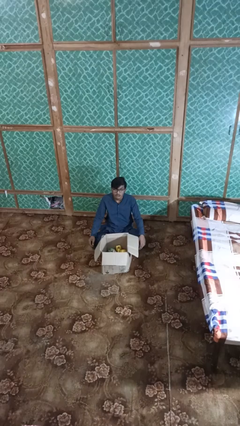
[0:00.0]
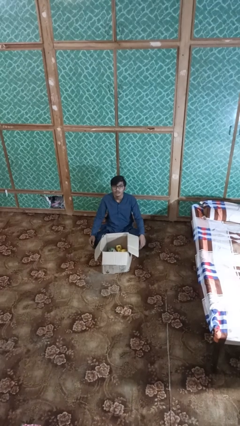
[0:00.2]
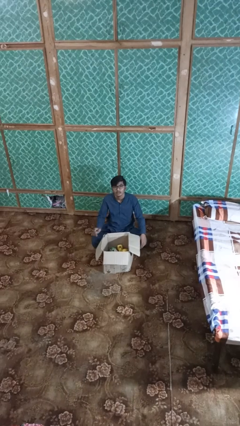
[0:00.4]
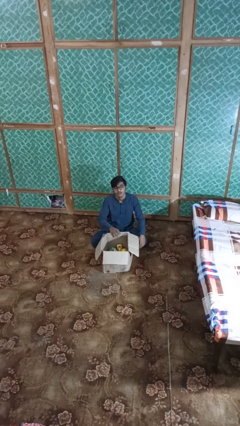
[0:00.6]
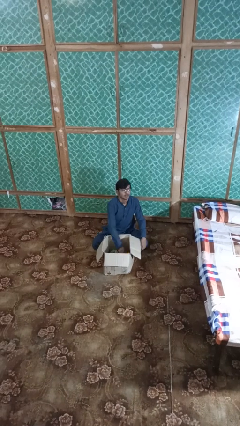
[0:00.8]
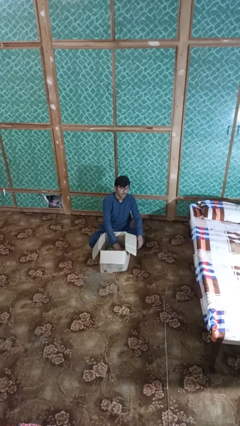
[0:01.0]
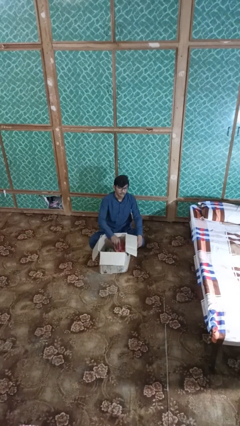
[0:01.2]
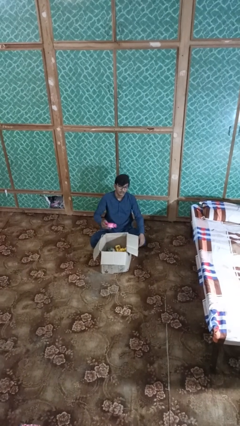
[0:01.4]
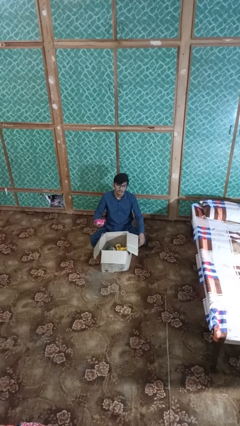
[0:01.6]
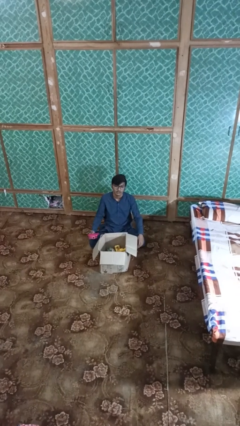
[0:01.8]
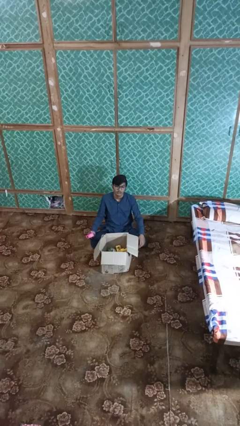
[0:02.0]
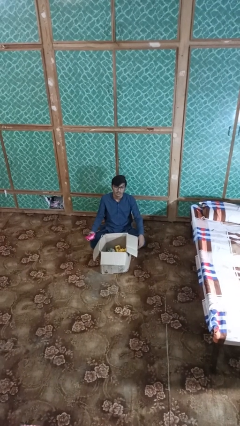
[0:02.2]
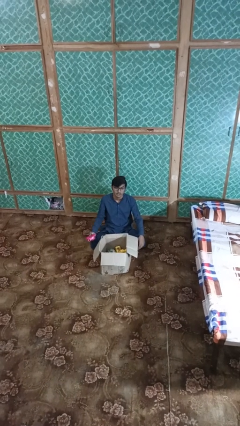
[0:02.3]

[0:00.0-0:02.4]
person takes object from box

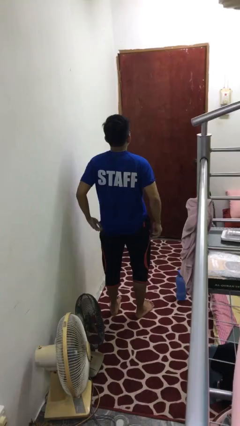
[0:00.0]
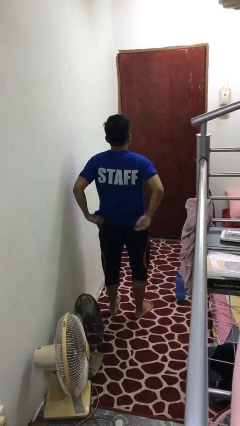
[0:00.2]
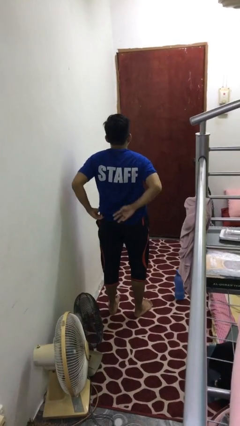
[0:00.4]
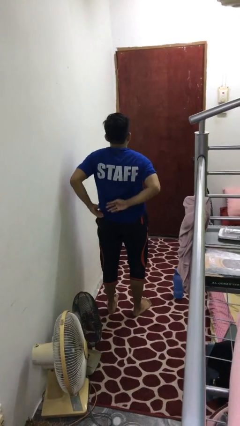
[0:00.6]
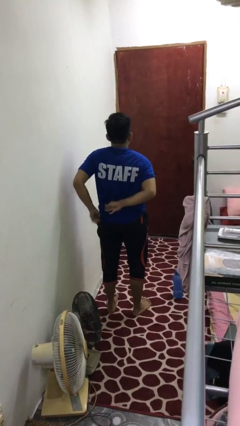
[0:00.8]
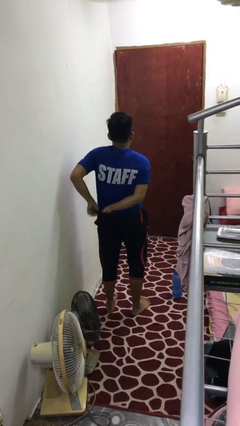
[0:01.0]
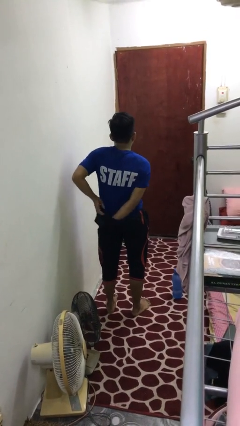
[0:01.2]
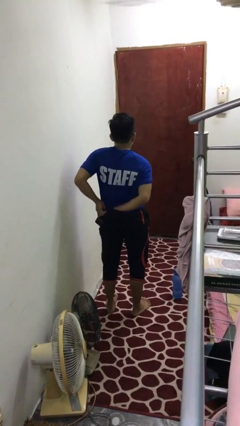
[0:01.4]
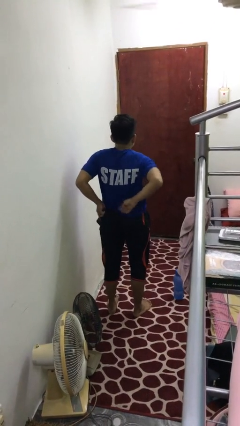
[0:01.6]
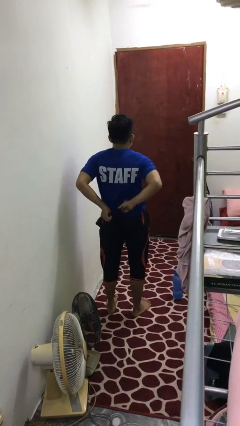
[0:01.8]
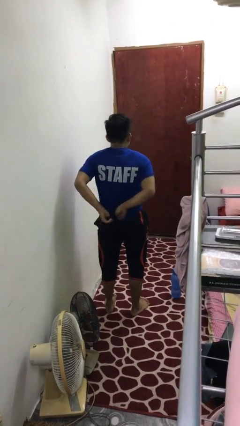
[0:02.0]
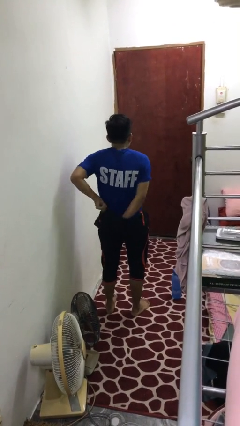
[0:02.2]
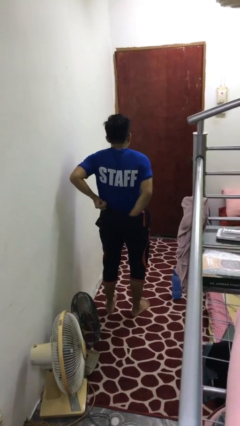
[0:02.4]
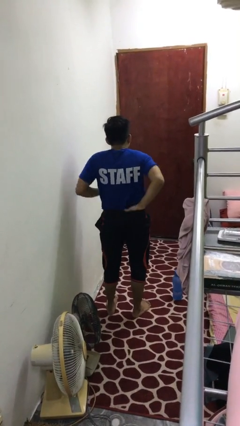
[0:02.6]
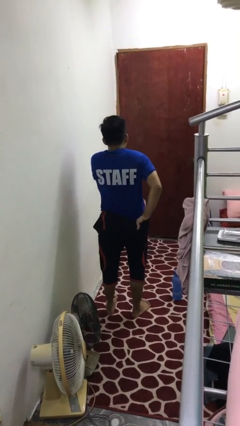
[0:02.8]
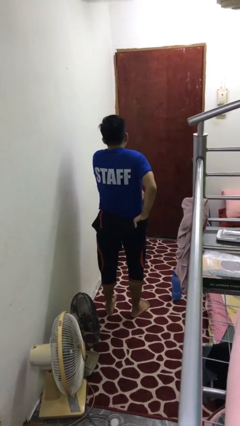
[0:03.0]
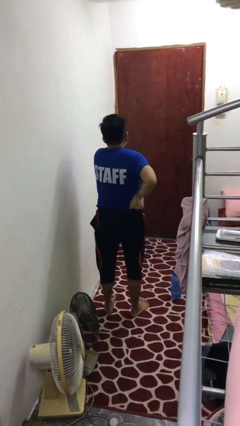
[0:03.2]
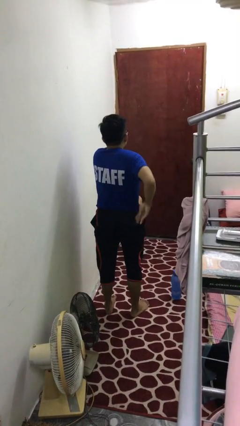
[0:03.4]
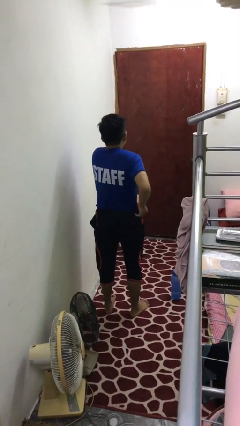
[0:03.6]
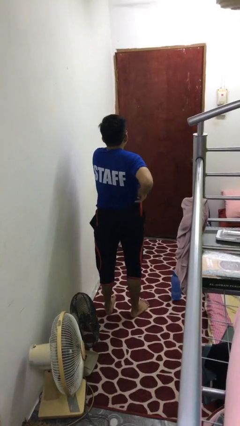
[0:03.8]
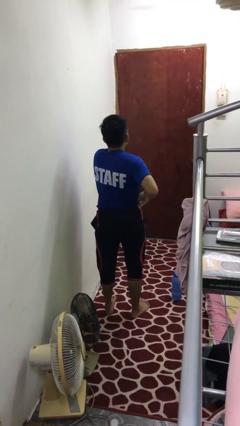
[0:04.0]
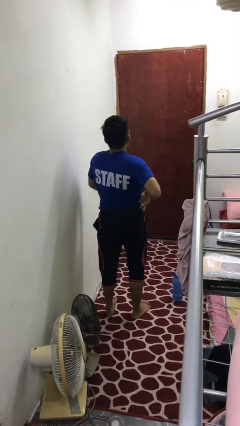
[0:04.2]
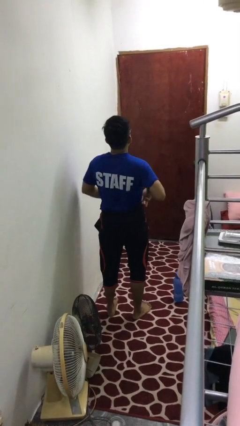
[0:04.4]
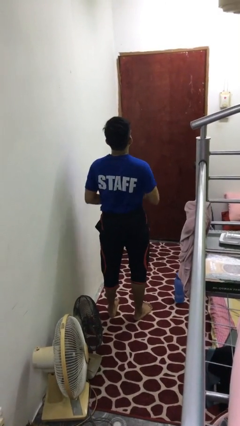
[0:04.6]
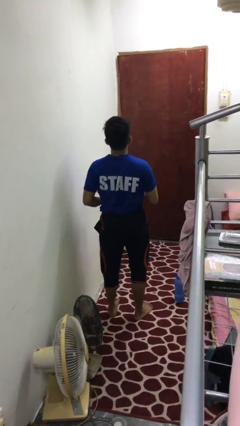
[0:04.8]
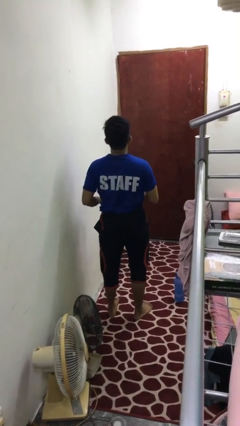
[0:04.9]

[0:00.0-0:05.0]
person tucks in shirt

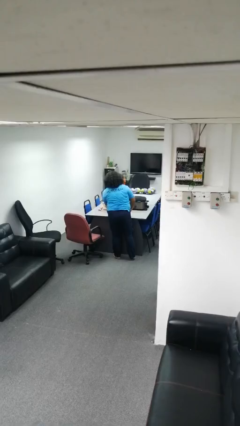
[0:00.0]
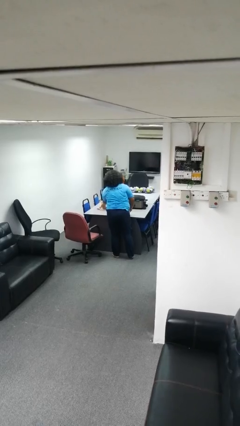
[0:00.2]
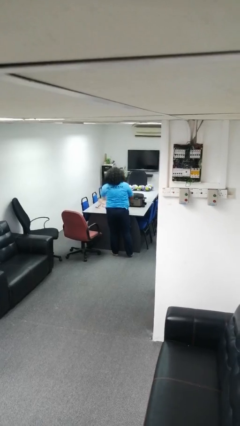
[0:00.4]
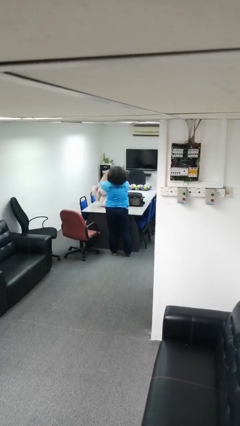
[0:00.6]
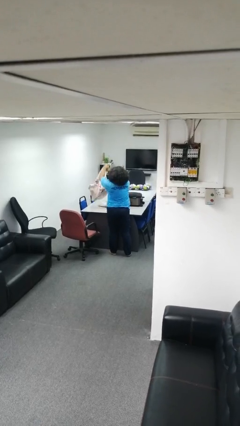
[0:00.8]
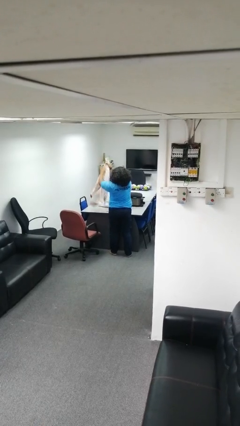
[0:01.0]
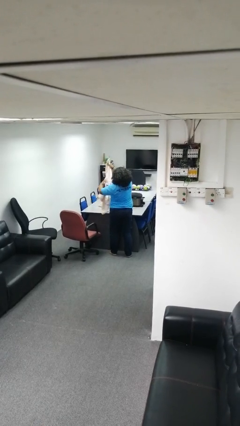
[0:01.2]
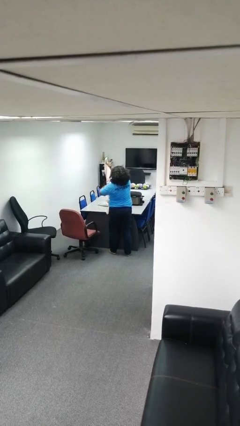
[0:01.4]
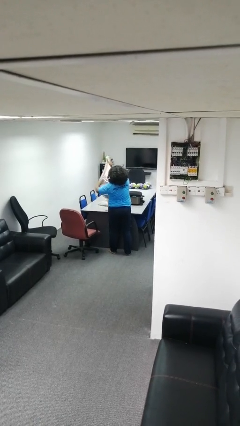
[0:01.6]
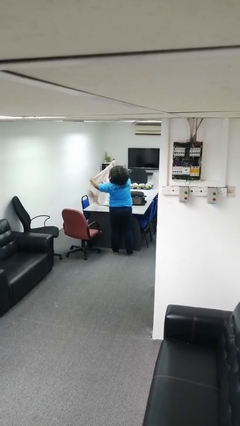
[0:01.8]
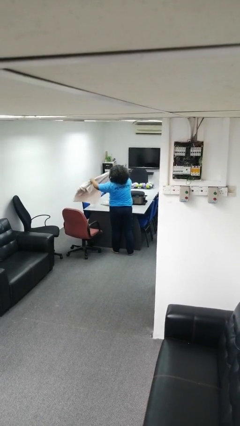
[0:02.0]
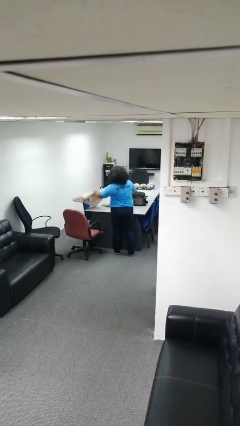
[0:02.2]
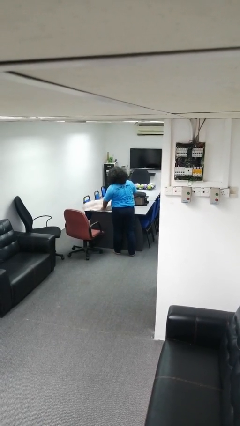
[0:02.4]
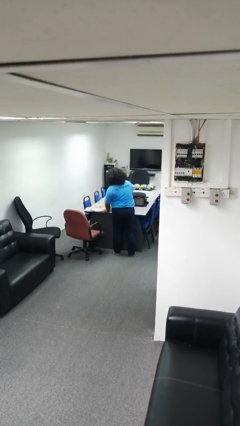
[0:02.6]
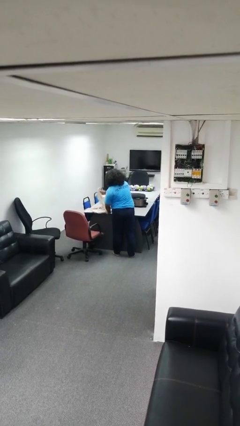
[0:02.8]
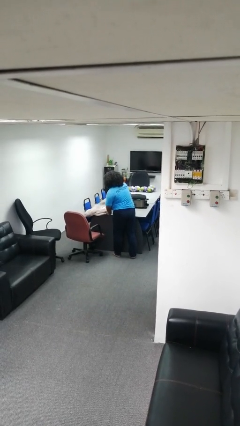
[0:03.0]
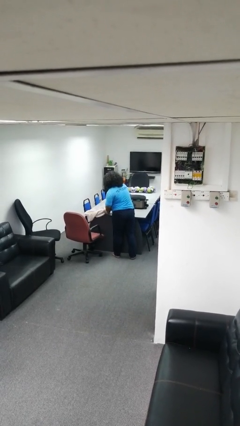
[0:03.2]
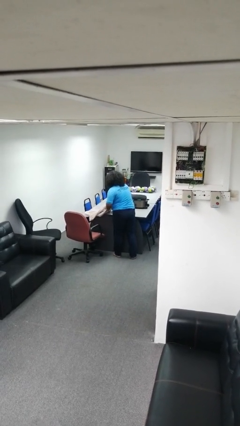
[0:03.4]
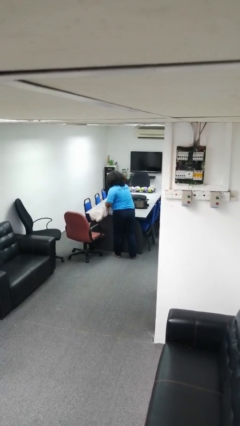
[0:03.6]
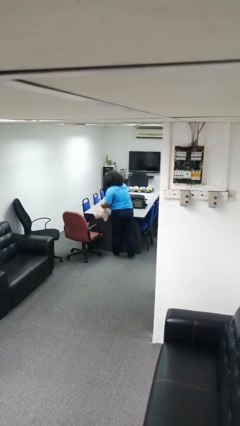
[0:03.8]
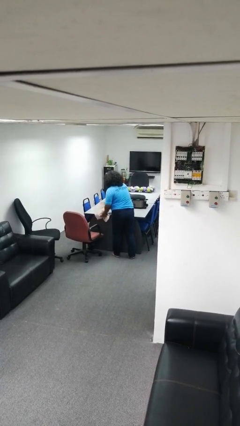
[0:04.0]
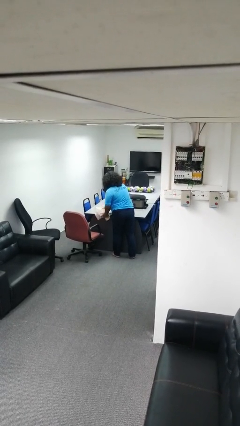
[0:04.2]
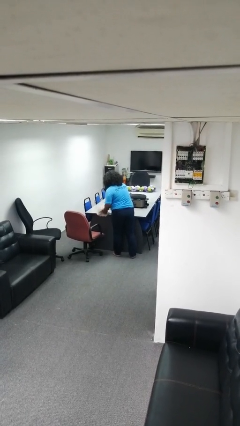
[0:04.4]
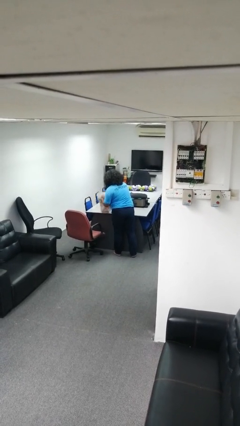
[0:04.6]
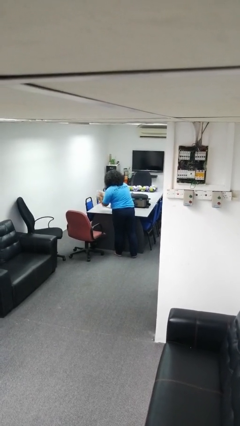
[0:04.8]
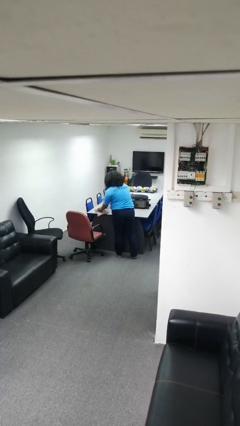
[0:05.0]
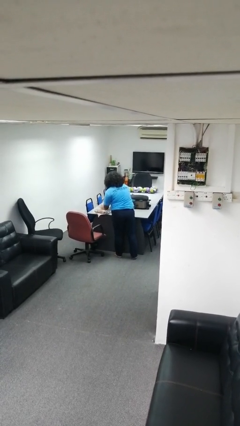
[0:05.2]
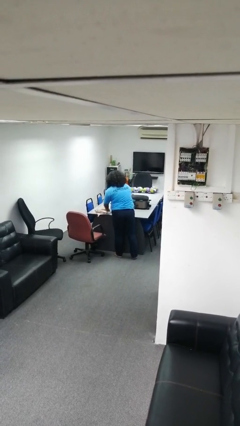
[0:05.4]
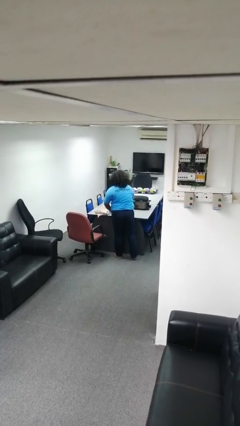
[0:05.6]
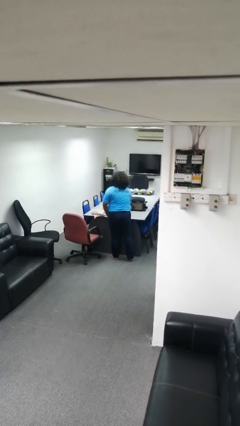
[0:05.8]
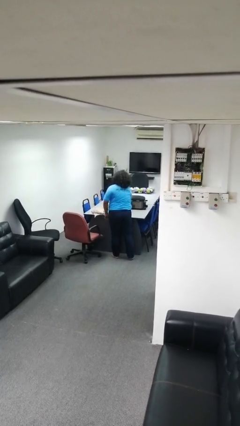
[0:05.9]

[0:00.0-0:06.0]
person folds towel

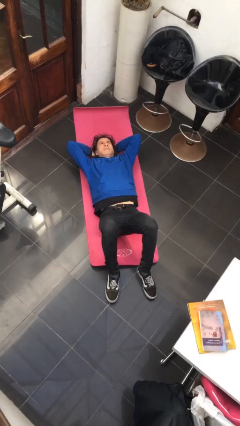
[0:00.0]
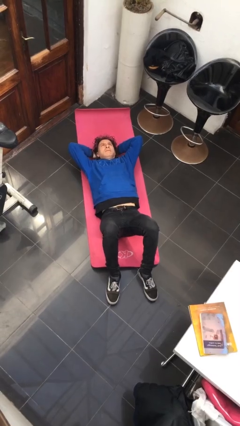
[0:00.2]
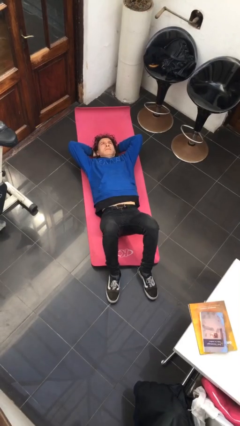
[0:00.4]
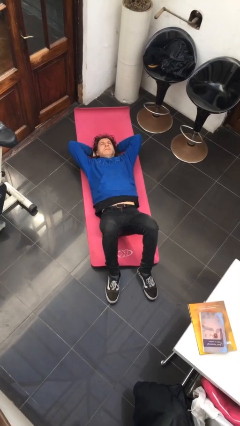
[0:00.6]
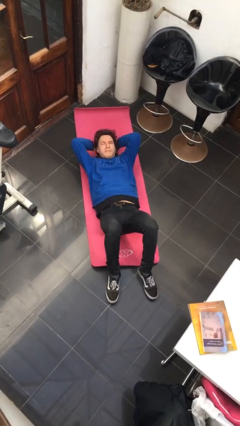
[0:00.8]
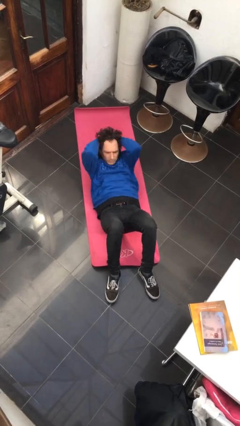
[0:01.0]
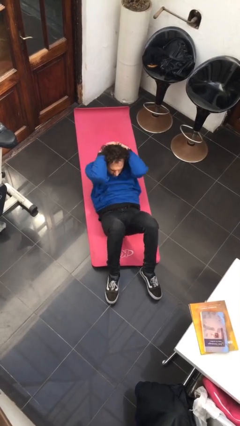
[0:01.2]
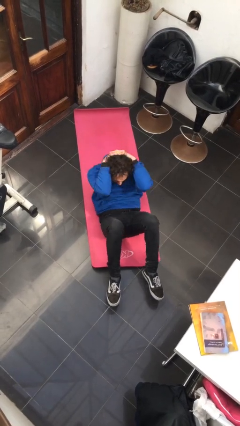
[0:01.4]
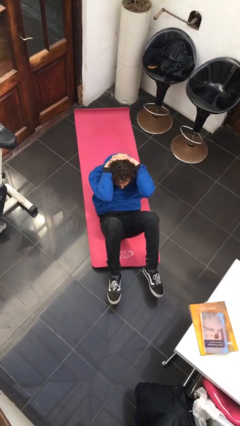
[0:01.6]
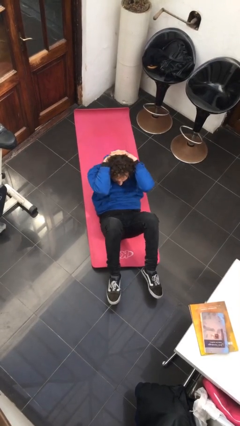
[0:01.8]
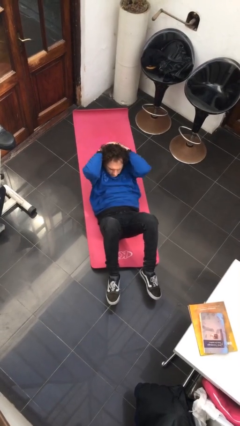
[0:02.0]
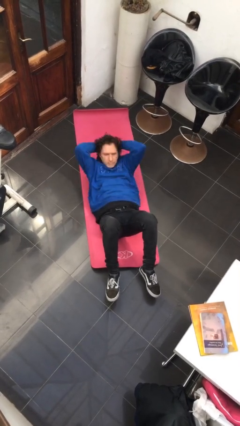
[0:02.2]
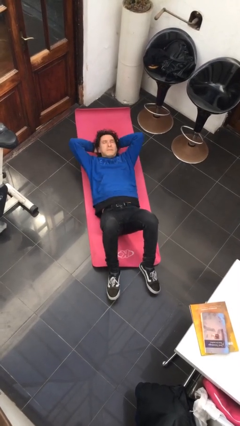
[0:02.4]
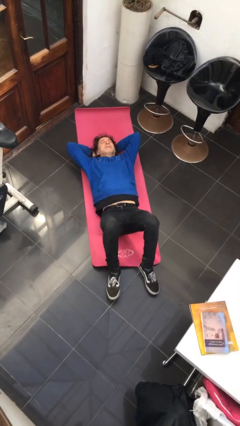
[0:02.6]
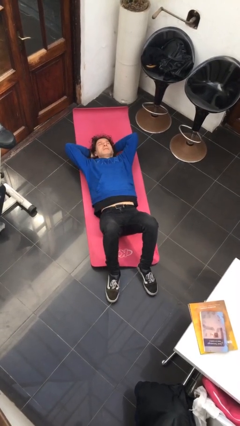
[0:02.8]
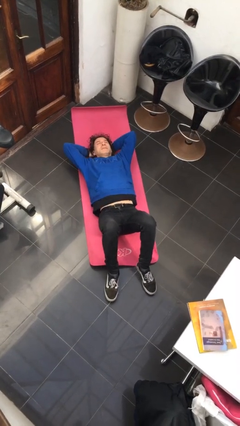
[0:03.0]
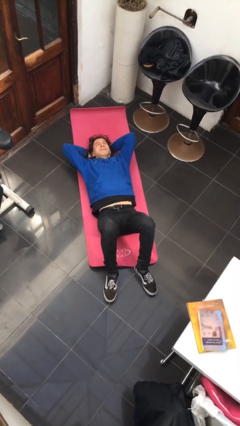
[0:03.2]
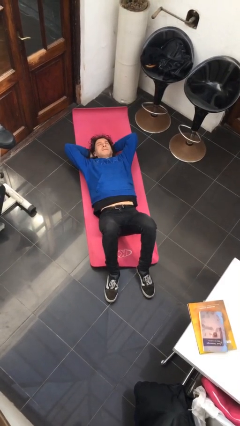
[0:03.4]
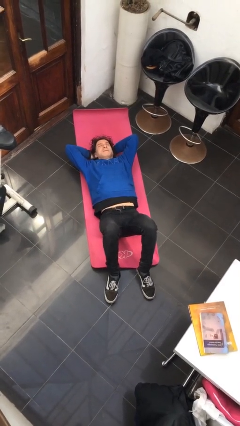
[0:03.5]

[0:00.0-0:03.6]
person exercises with situp

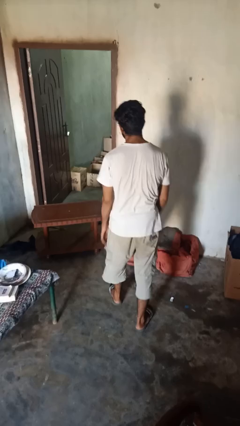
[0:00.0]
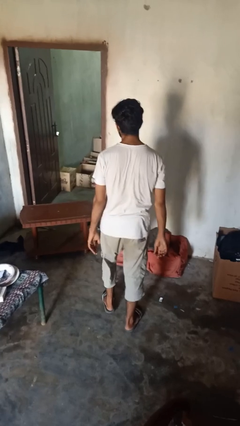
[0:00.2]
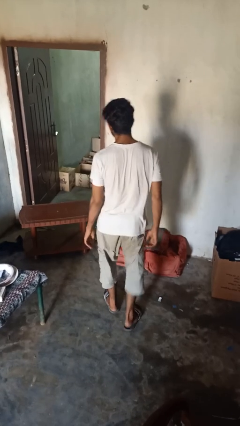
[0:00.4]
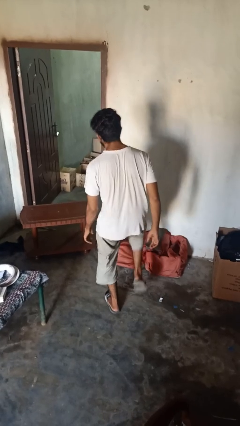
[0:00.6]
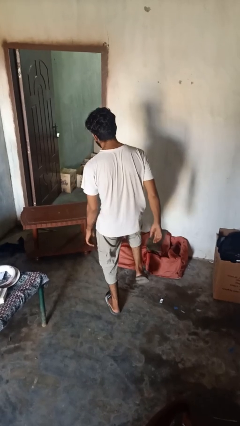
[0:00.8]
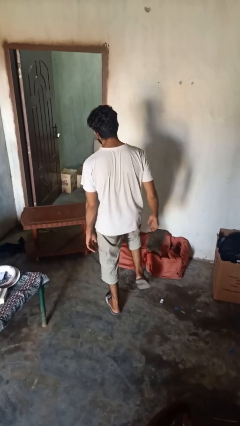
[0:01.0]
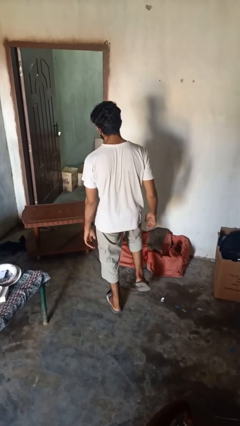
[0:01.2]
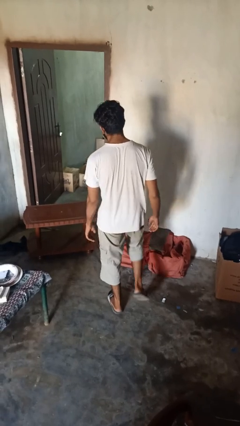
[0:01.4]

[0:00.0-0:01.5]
person karate kicks
